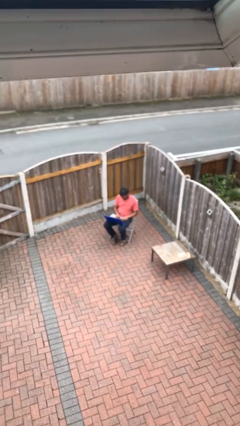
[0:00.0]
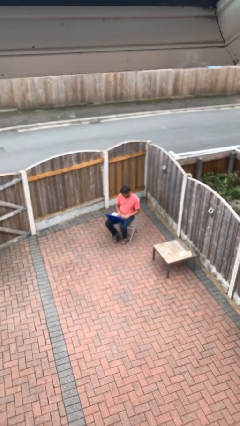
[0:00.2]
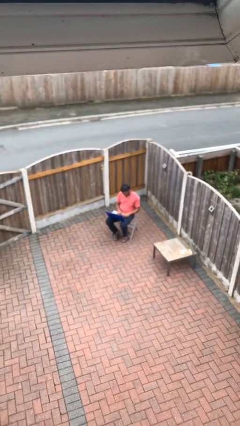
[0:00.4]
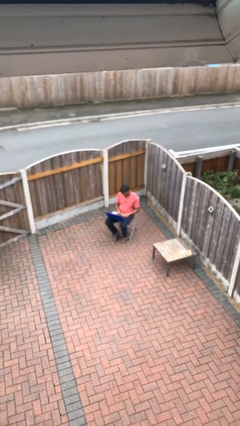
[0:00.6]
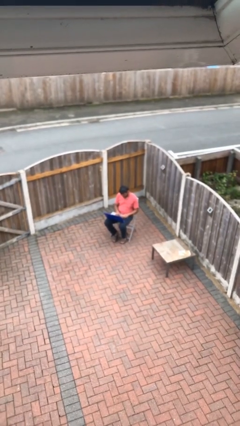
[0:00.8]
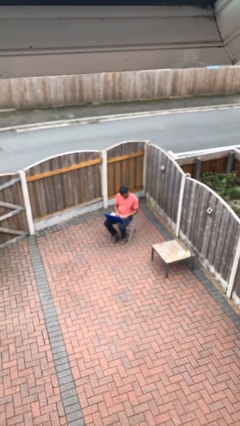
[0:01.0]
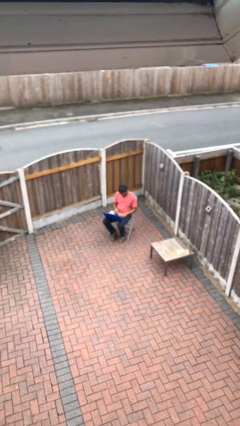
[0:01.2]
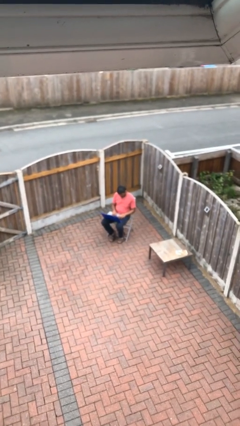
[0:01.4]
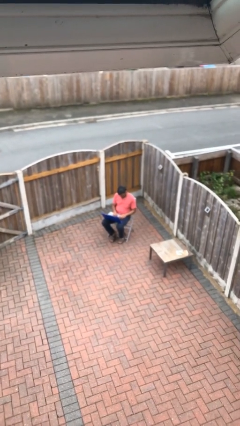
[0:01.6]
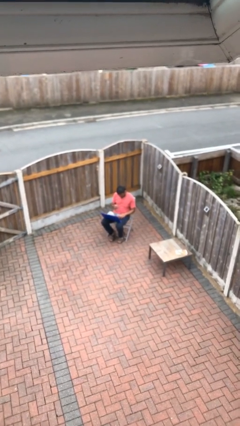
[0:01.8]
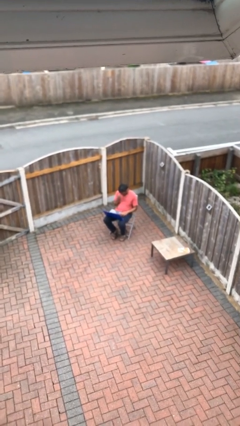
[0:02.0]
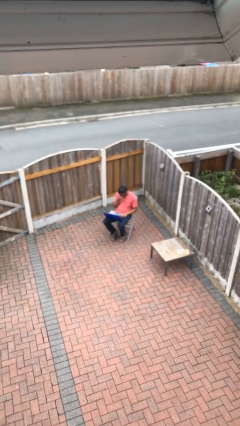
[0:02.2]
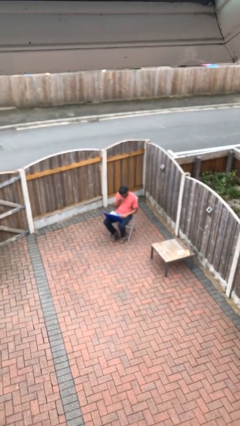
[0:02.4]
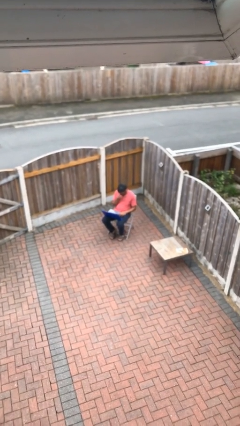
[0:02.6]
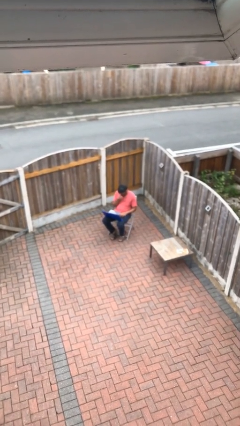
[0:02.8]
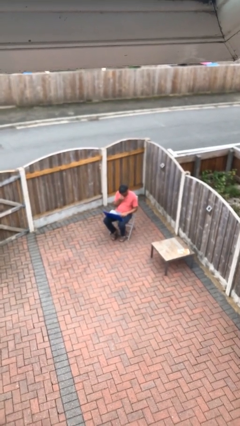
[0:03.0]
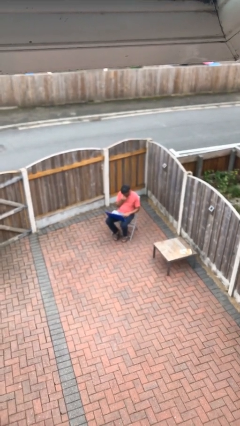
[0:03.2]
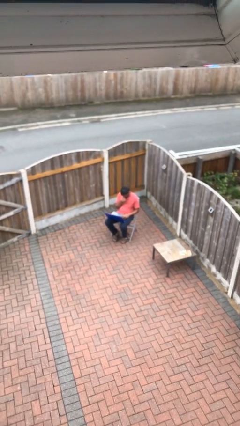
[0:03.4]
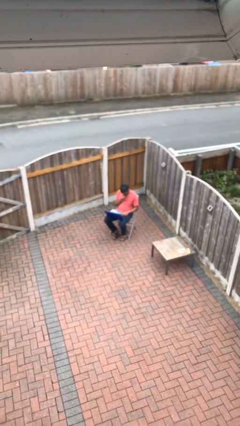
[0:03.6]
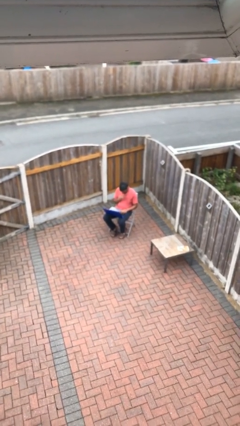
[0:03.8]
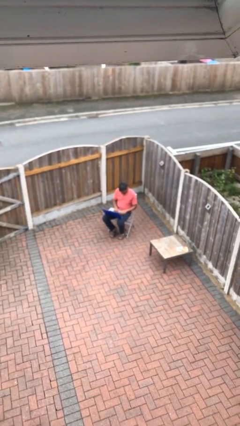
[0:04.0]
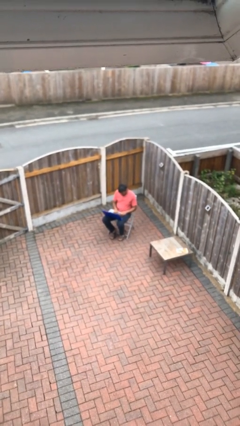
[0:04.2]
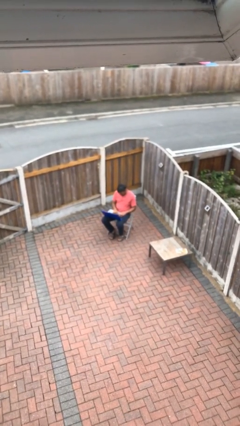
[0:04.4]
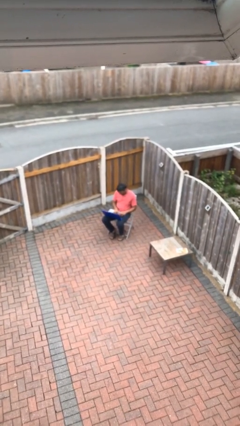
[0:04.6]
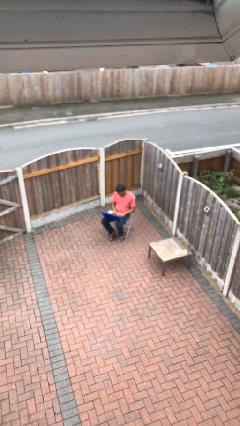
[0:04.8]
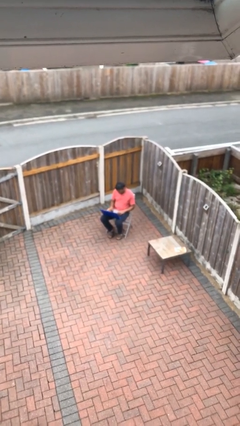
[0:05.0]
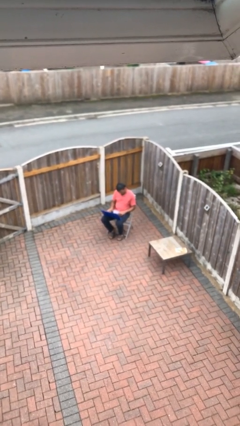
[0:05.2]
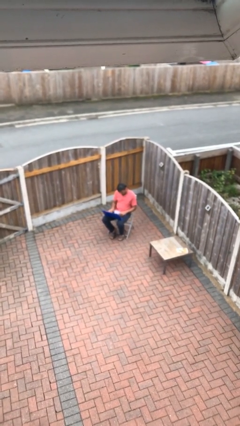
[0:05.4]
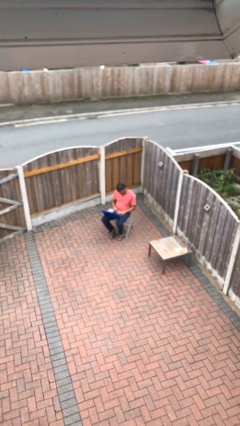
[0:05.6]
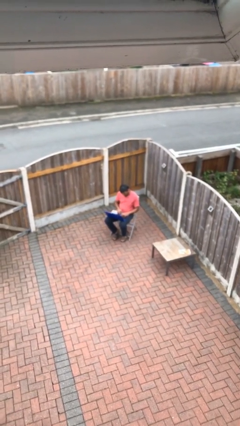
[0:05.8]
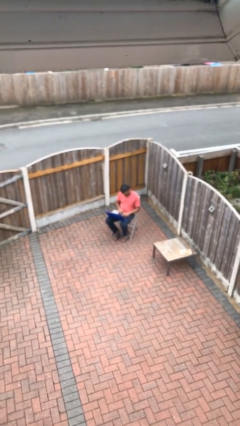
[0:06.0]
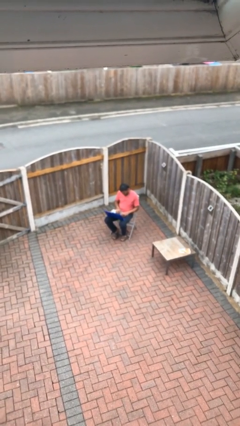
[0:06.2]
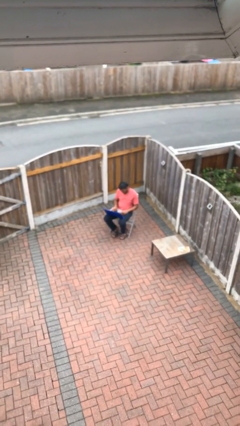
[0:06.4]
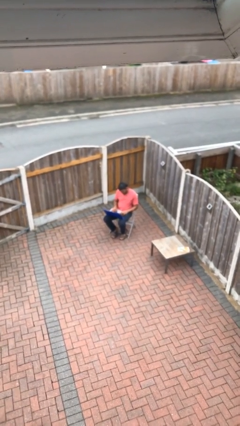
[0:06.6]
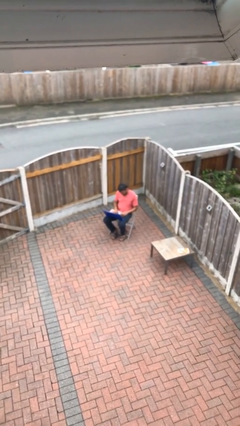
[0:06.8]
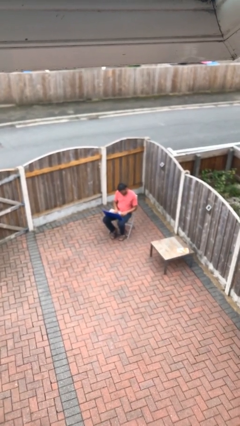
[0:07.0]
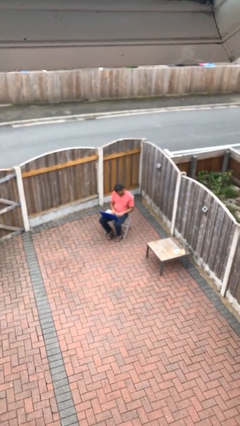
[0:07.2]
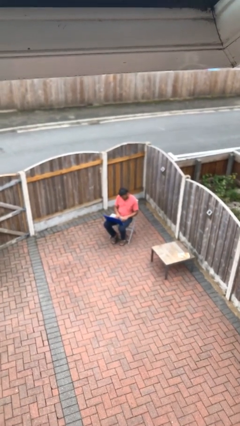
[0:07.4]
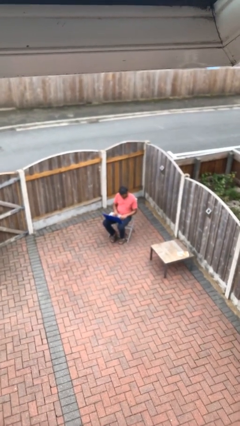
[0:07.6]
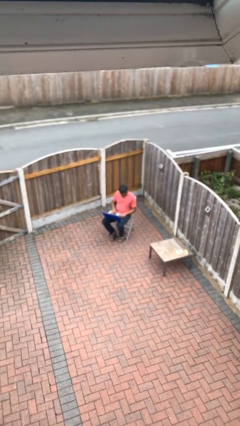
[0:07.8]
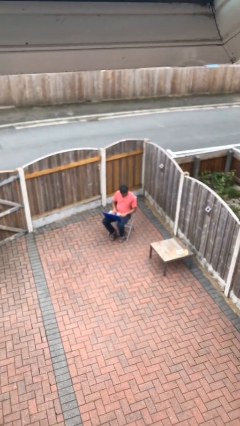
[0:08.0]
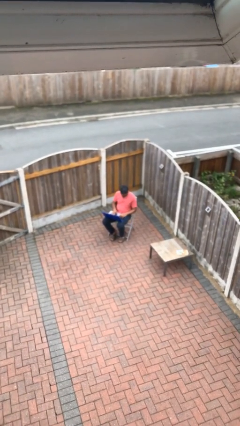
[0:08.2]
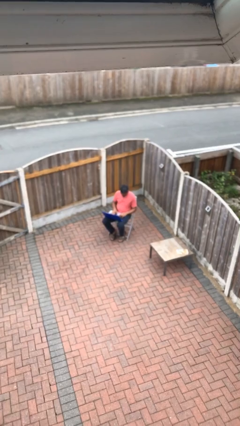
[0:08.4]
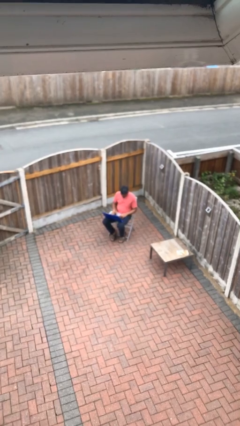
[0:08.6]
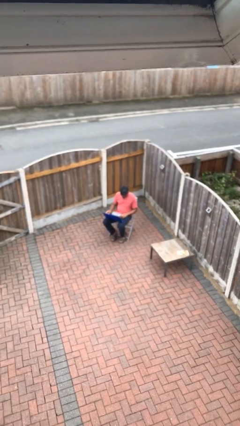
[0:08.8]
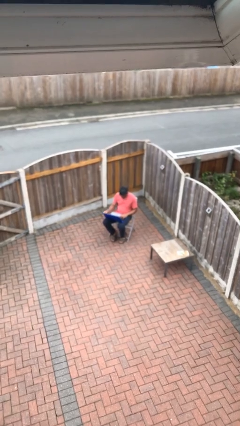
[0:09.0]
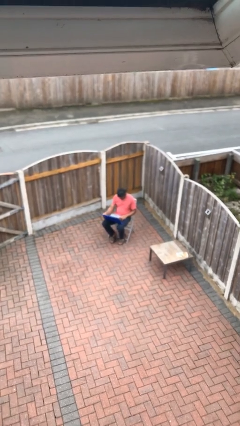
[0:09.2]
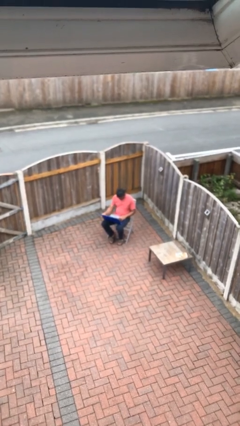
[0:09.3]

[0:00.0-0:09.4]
person interacts with laptop

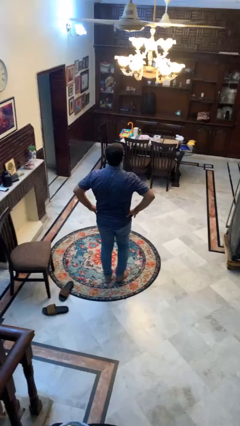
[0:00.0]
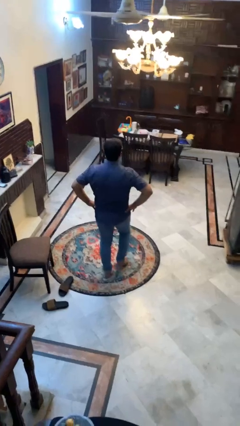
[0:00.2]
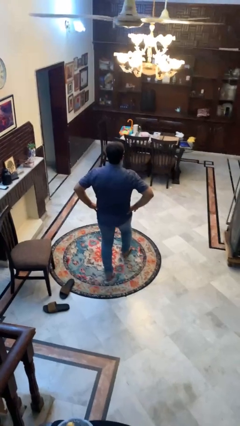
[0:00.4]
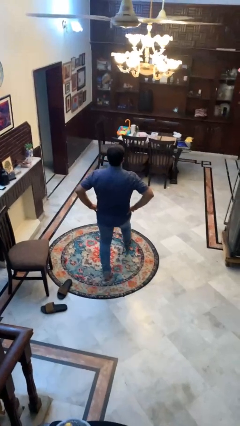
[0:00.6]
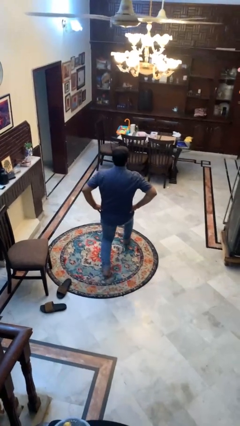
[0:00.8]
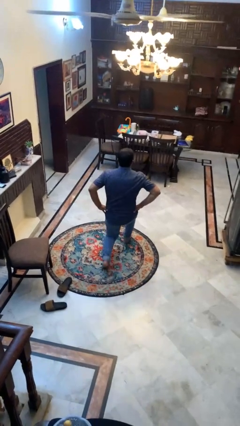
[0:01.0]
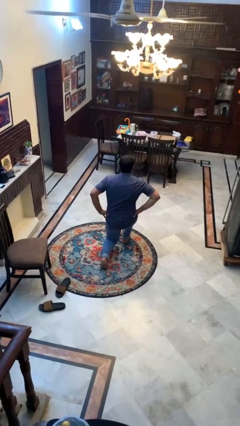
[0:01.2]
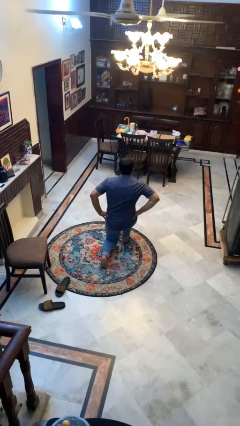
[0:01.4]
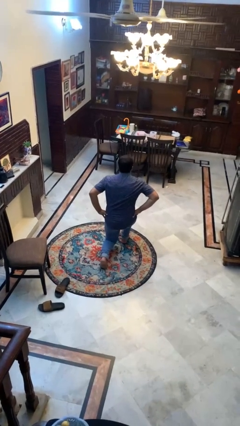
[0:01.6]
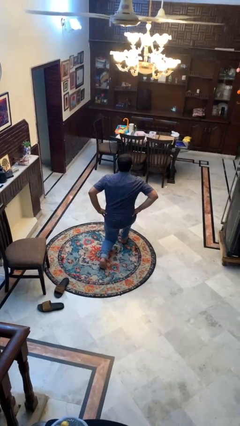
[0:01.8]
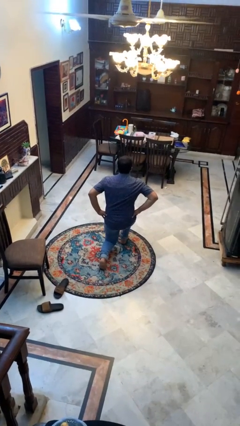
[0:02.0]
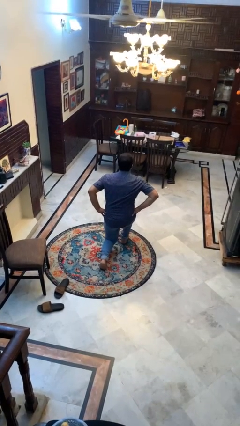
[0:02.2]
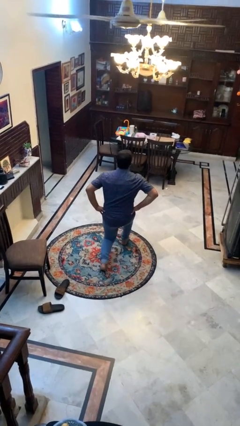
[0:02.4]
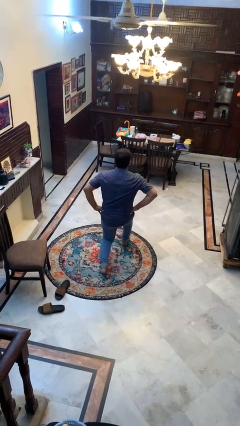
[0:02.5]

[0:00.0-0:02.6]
person exercises with lunges

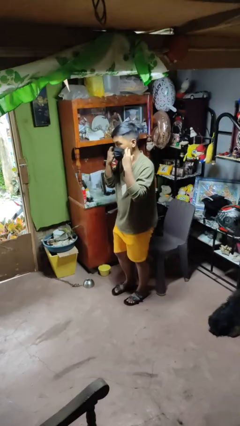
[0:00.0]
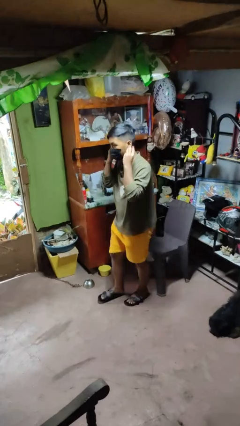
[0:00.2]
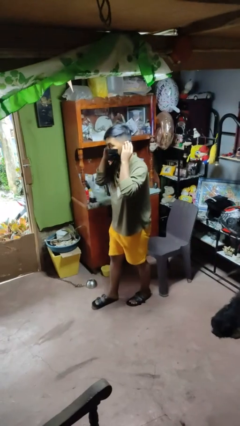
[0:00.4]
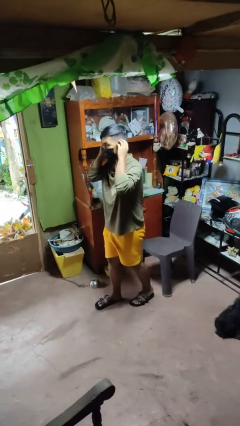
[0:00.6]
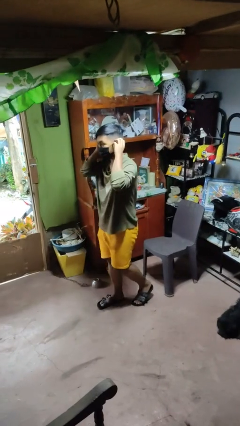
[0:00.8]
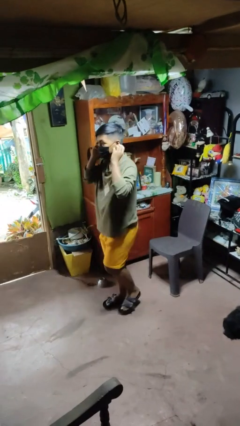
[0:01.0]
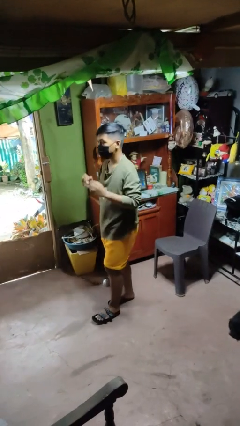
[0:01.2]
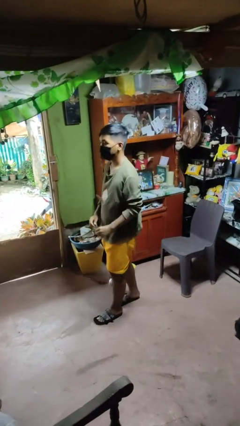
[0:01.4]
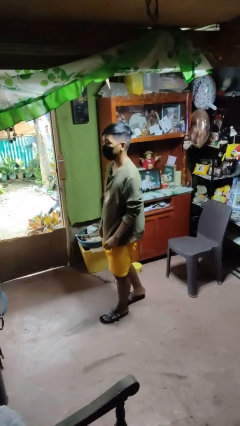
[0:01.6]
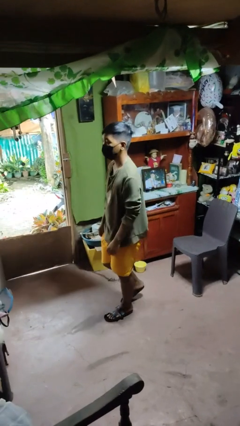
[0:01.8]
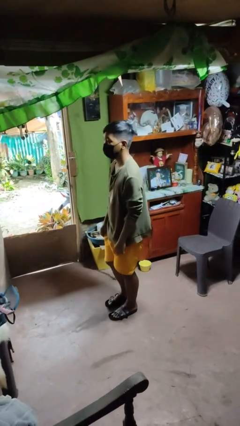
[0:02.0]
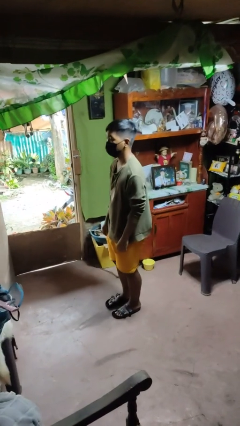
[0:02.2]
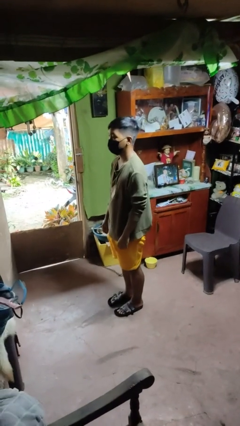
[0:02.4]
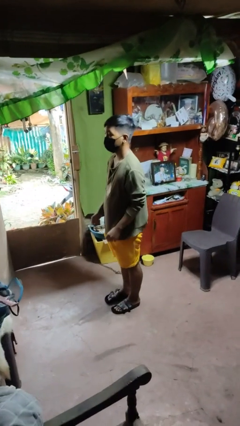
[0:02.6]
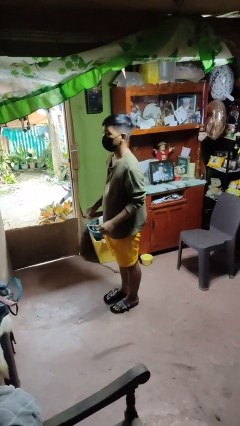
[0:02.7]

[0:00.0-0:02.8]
person puts on facemask

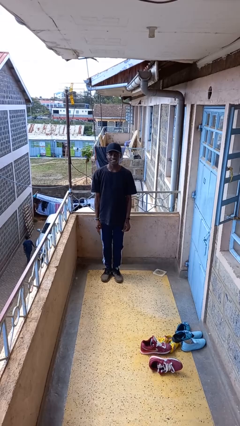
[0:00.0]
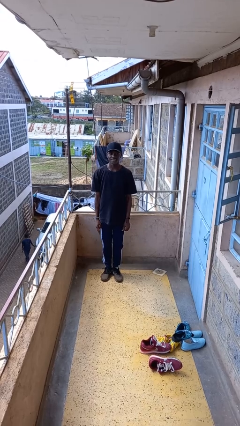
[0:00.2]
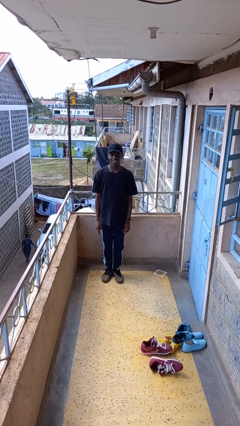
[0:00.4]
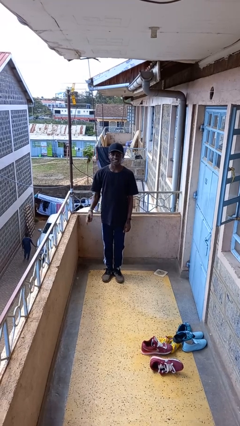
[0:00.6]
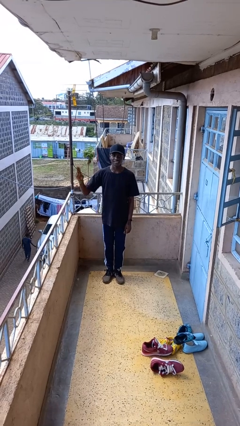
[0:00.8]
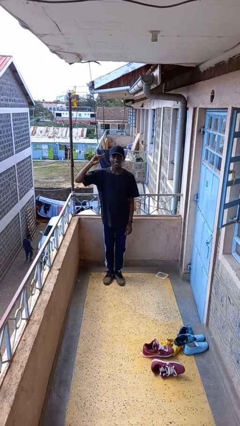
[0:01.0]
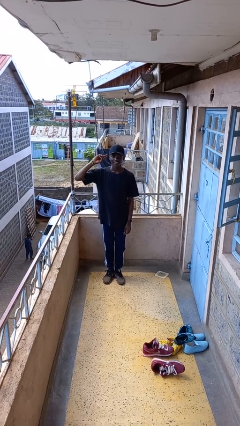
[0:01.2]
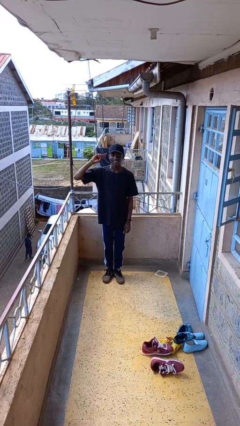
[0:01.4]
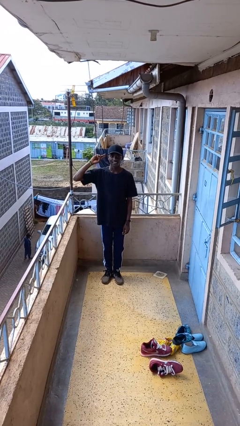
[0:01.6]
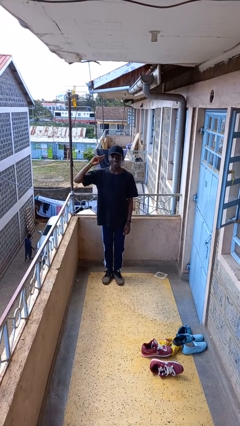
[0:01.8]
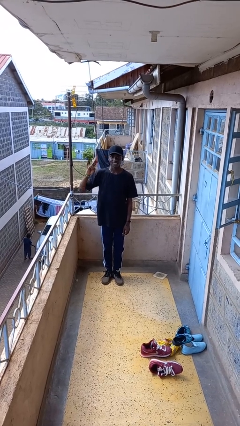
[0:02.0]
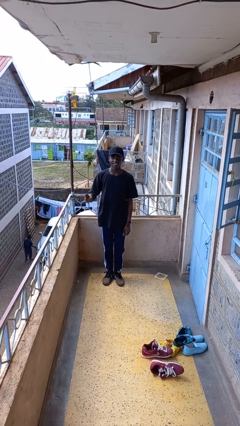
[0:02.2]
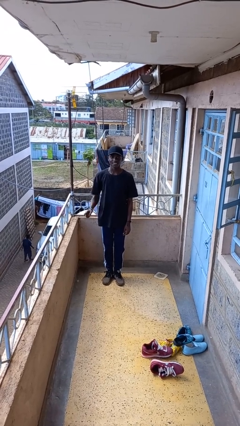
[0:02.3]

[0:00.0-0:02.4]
person salutes

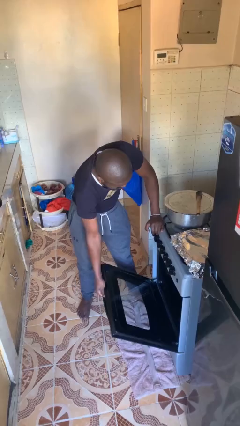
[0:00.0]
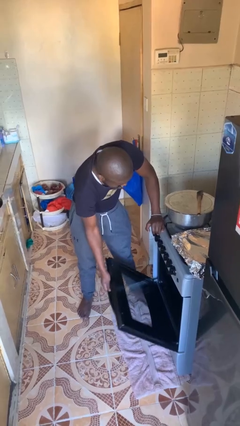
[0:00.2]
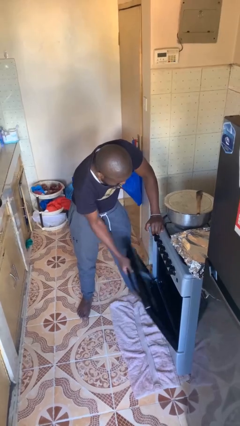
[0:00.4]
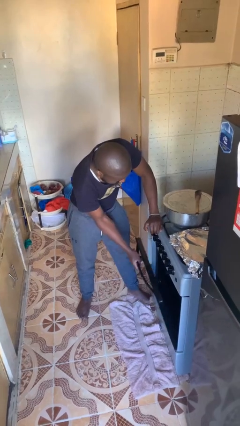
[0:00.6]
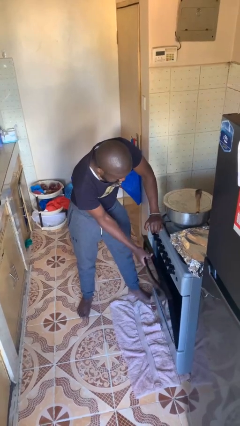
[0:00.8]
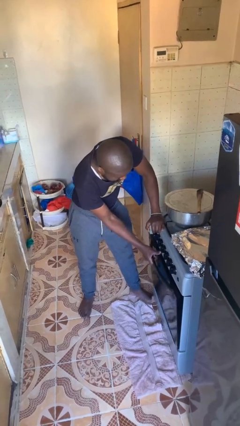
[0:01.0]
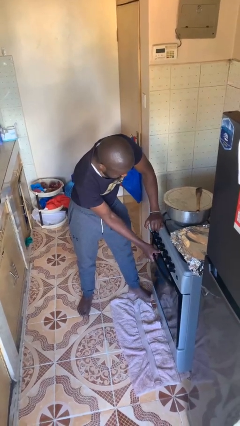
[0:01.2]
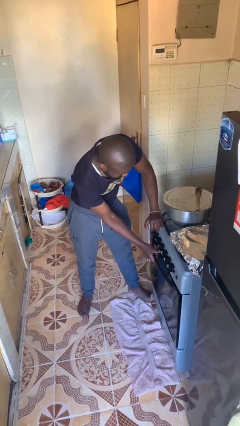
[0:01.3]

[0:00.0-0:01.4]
person closes oven door
